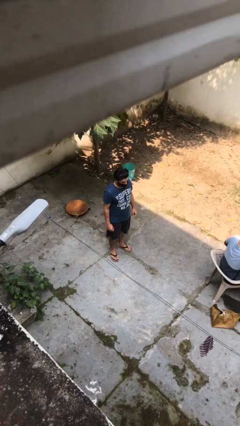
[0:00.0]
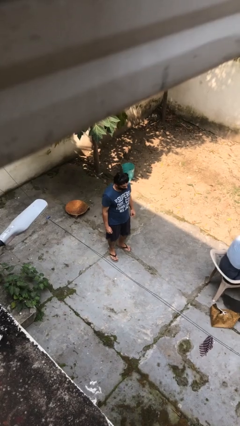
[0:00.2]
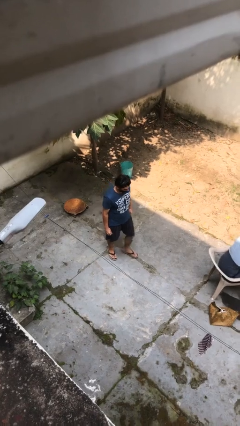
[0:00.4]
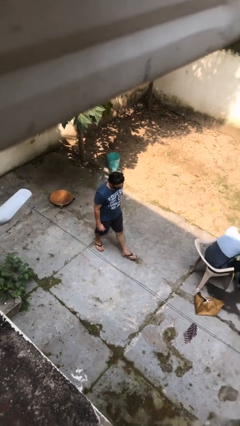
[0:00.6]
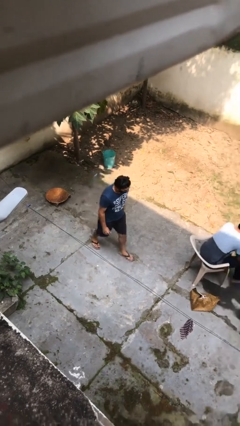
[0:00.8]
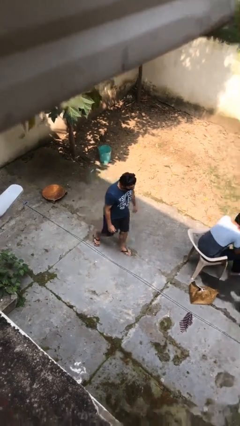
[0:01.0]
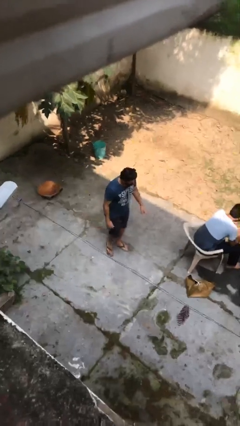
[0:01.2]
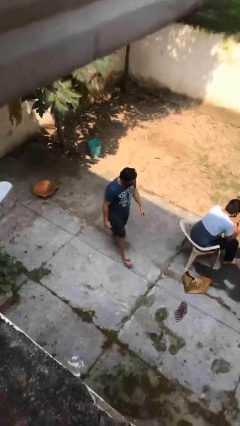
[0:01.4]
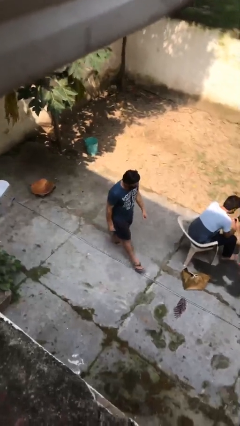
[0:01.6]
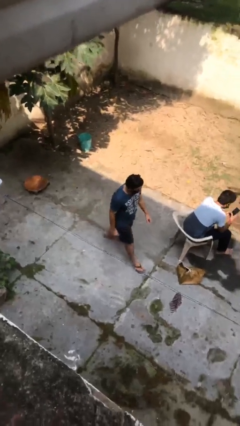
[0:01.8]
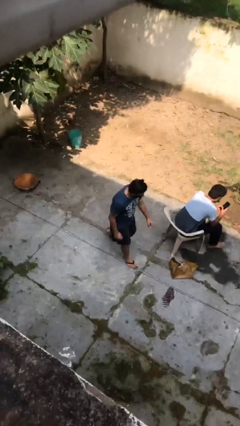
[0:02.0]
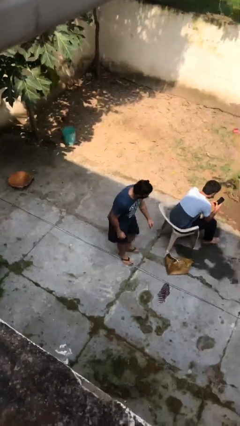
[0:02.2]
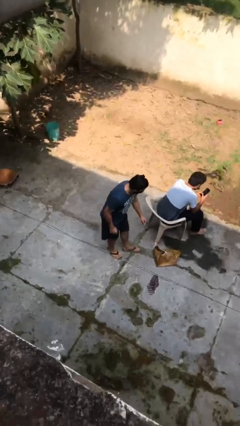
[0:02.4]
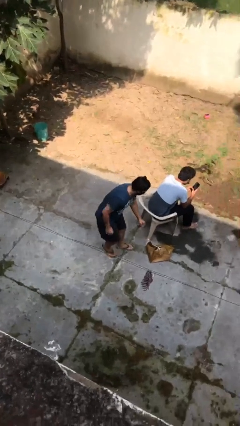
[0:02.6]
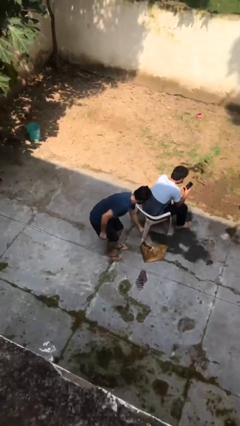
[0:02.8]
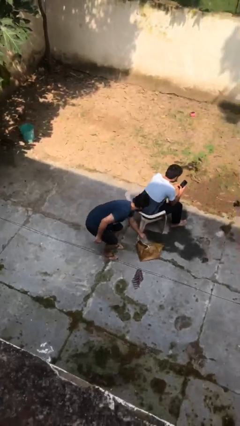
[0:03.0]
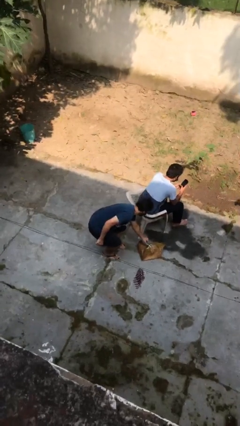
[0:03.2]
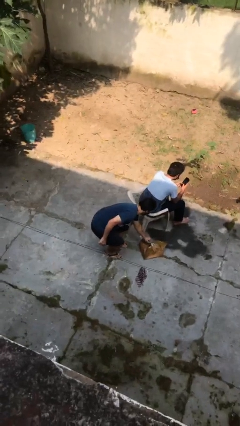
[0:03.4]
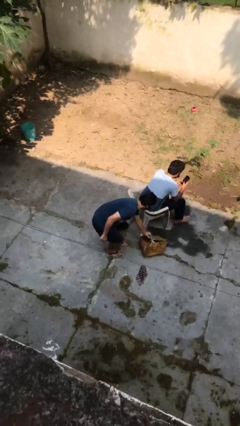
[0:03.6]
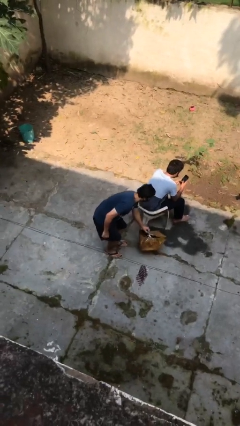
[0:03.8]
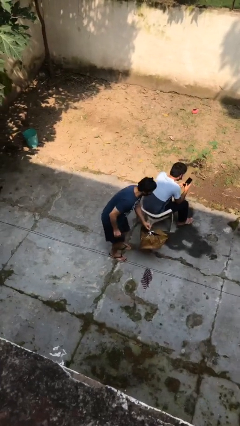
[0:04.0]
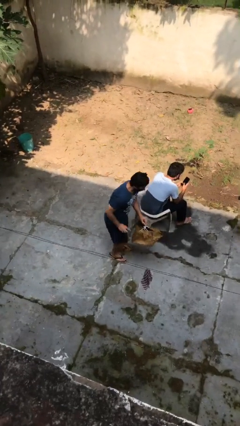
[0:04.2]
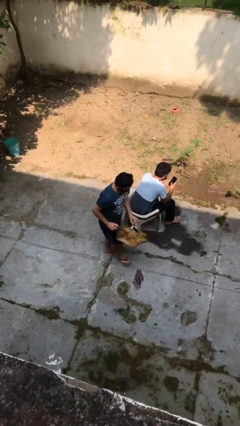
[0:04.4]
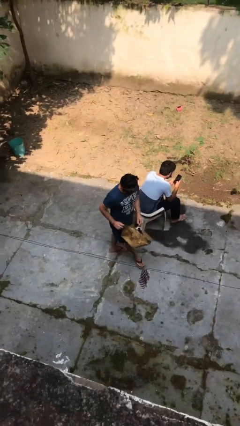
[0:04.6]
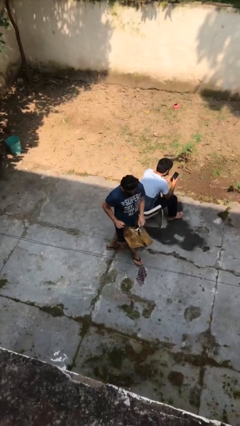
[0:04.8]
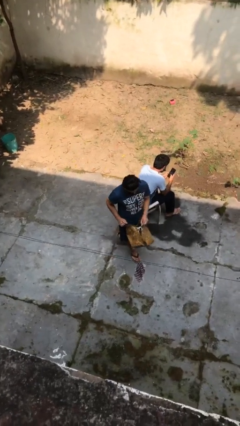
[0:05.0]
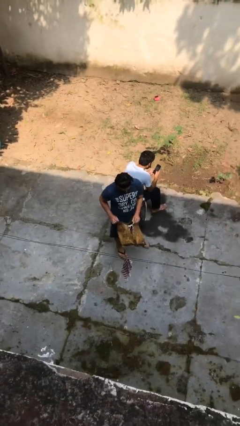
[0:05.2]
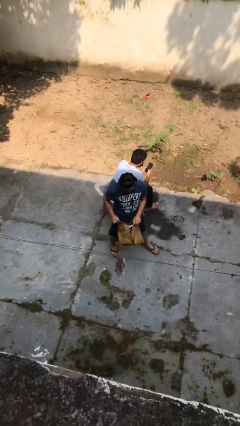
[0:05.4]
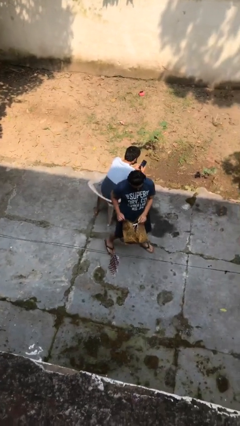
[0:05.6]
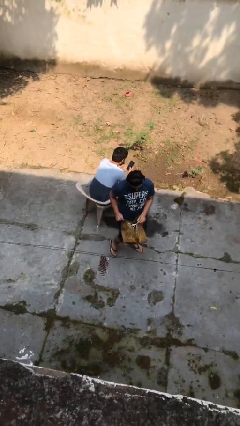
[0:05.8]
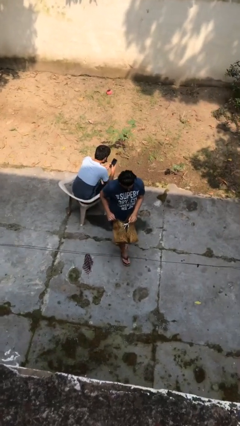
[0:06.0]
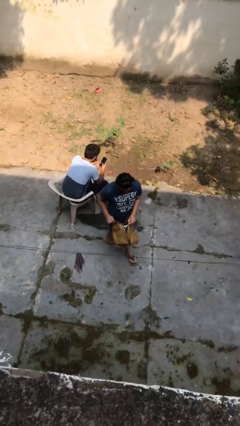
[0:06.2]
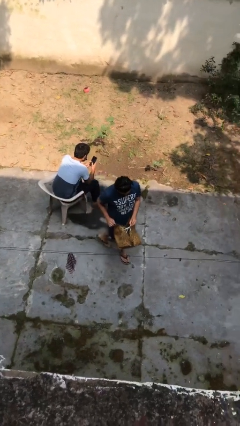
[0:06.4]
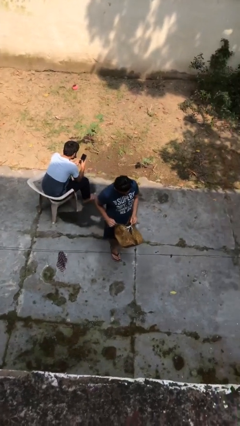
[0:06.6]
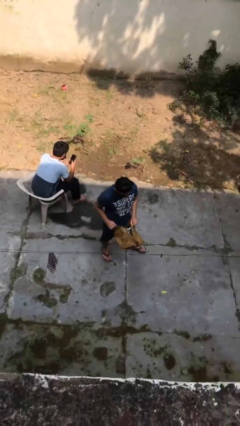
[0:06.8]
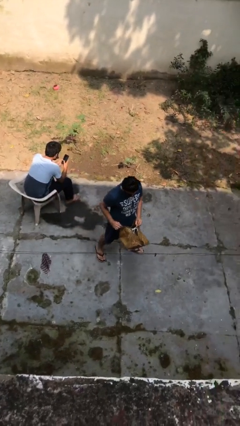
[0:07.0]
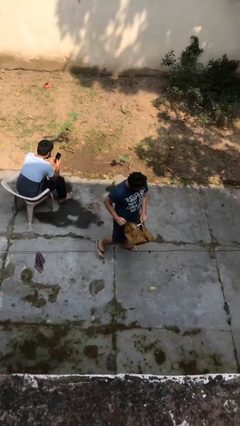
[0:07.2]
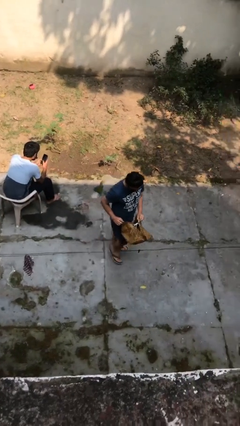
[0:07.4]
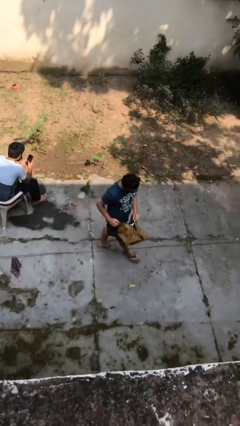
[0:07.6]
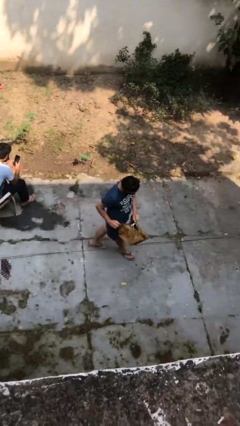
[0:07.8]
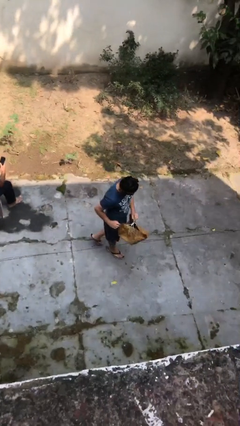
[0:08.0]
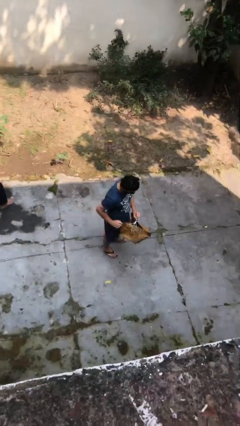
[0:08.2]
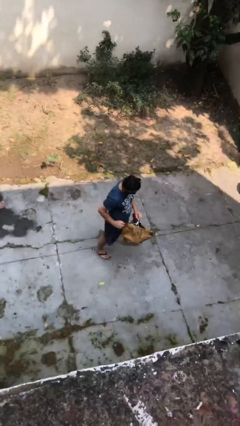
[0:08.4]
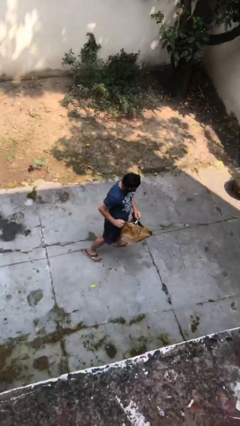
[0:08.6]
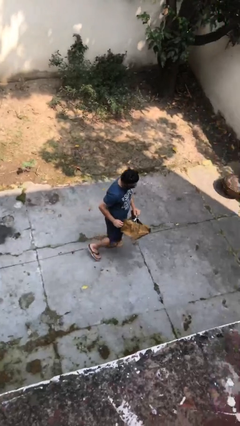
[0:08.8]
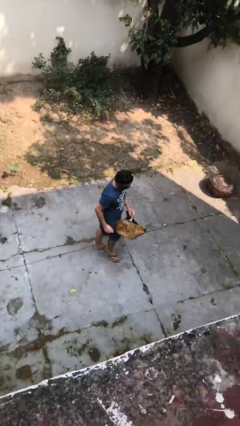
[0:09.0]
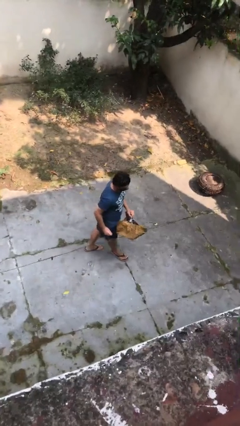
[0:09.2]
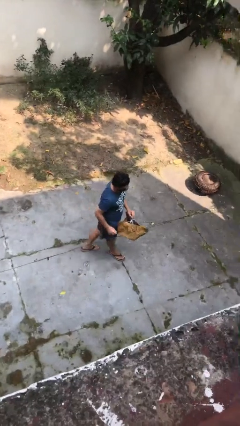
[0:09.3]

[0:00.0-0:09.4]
person steals object from person

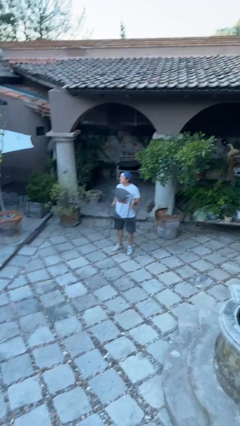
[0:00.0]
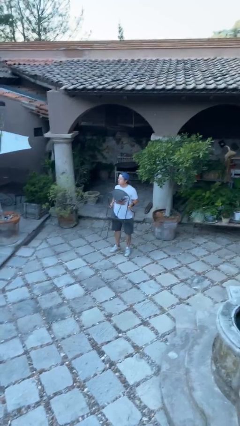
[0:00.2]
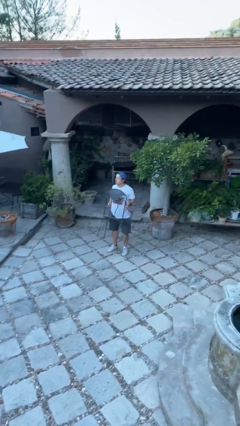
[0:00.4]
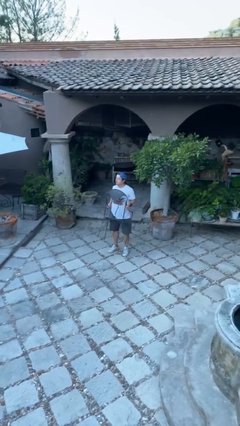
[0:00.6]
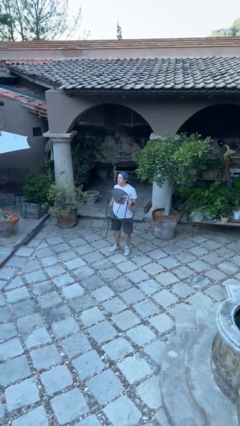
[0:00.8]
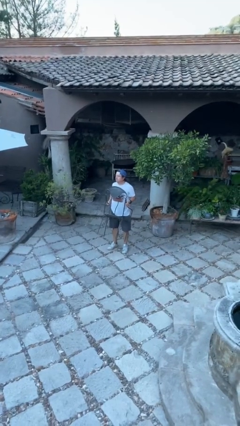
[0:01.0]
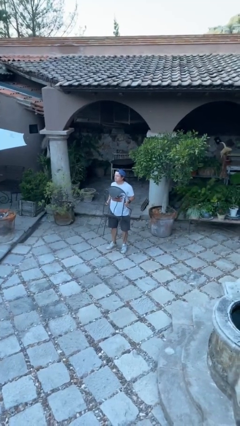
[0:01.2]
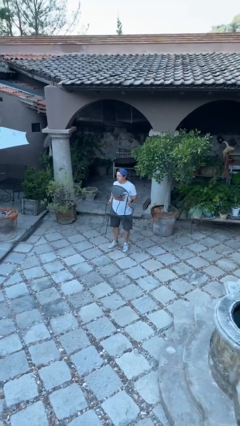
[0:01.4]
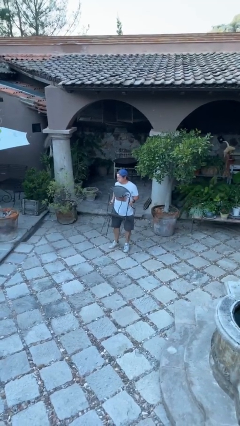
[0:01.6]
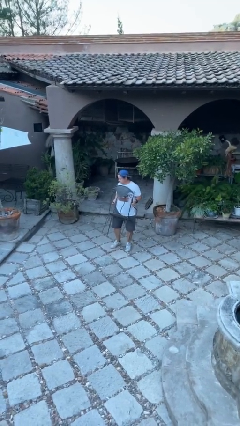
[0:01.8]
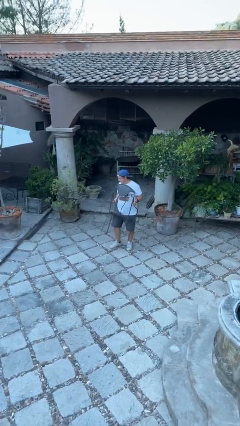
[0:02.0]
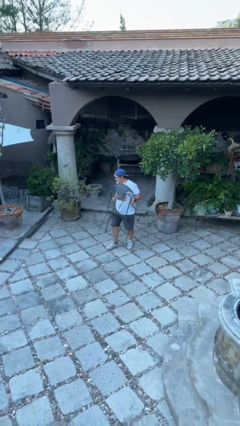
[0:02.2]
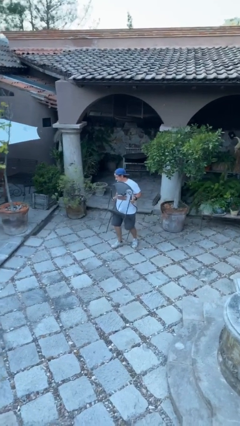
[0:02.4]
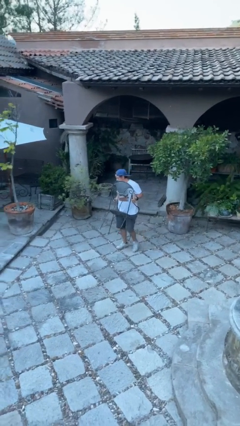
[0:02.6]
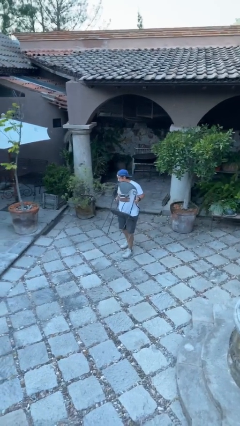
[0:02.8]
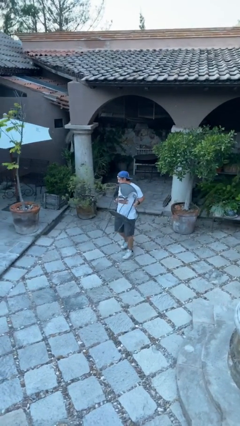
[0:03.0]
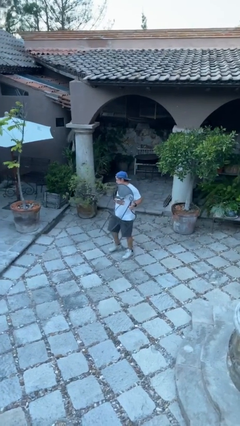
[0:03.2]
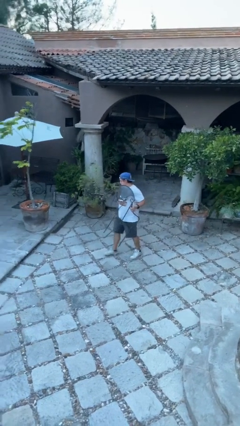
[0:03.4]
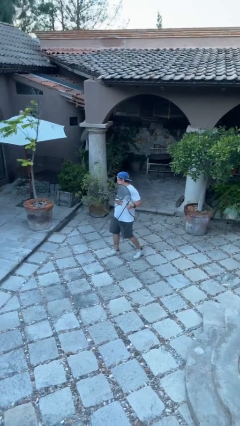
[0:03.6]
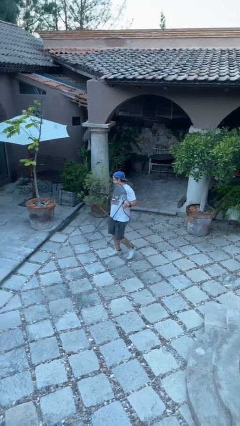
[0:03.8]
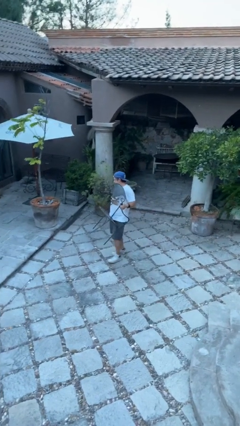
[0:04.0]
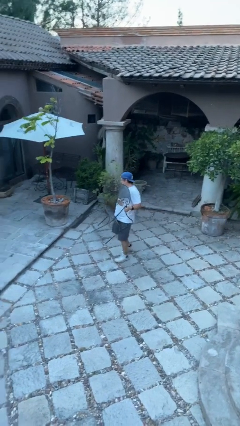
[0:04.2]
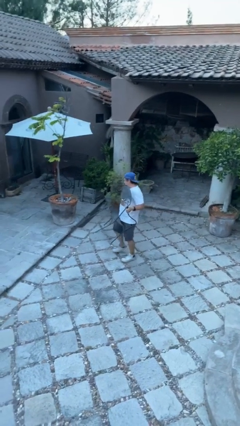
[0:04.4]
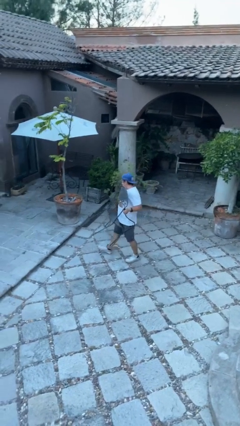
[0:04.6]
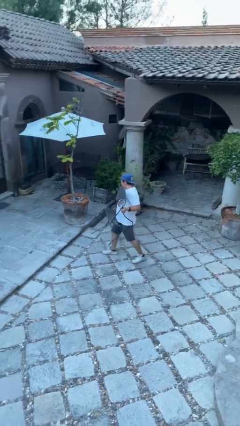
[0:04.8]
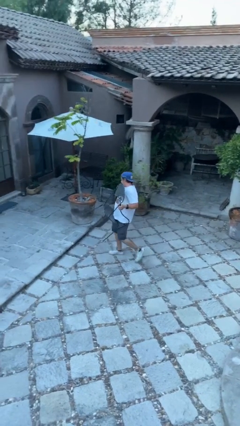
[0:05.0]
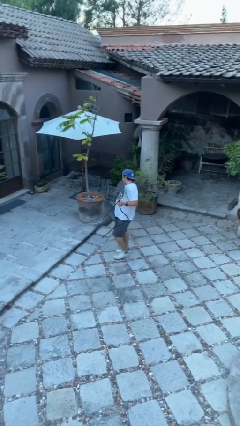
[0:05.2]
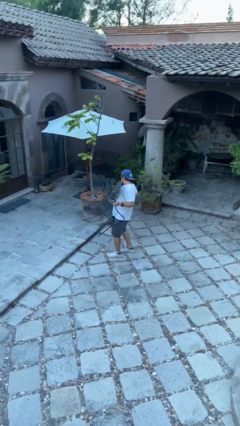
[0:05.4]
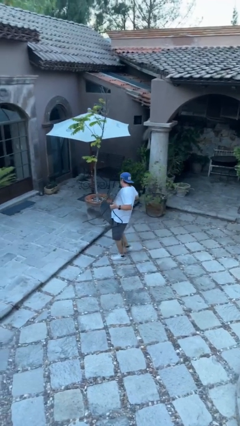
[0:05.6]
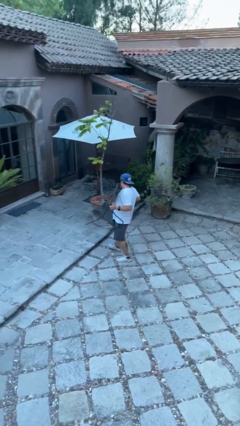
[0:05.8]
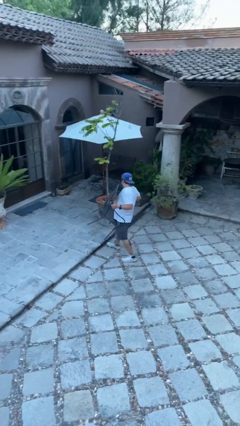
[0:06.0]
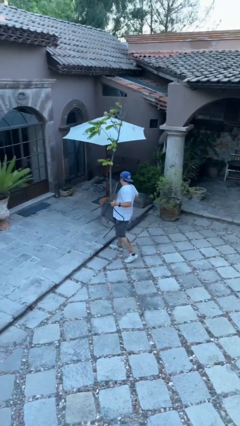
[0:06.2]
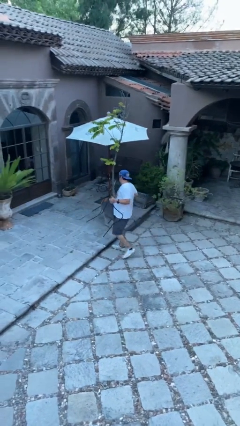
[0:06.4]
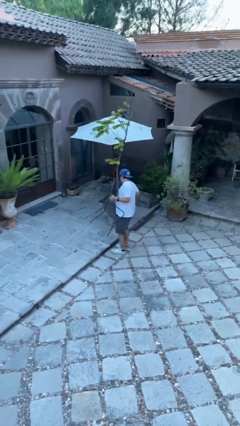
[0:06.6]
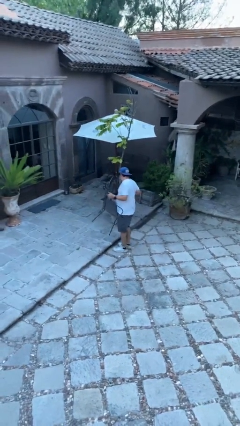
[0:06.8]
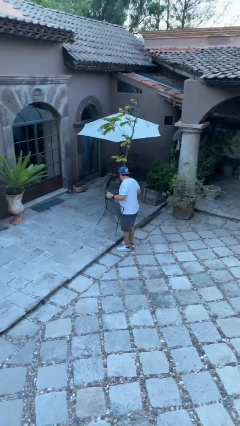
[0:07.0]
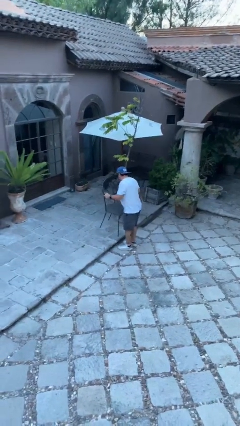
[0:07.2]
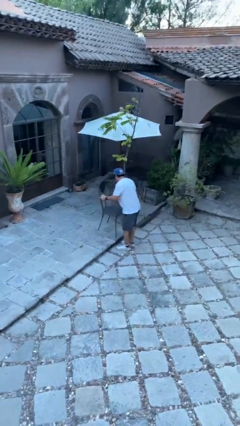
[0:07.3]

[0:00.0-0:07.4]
person carries heavy object

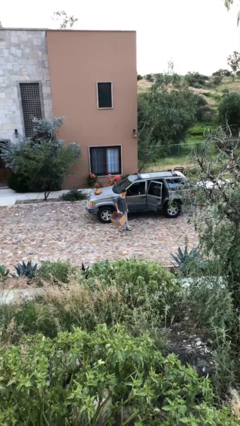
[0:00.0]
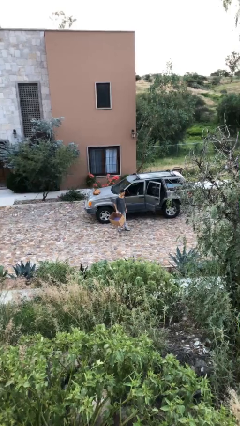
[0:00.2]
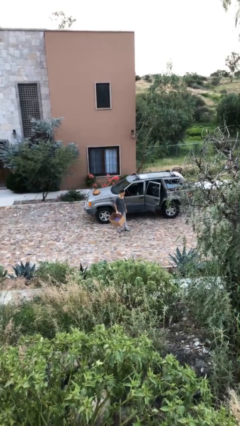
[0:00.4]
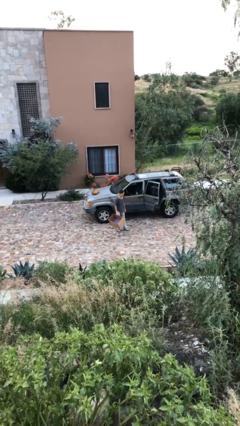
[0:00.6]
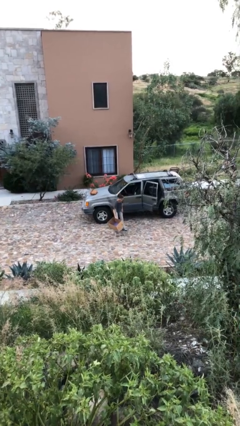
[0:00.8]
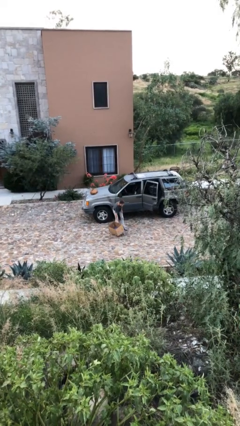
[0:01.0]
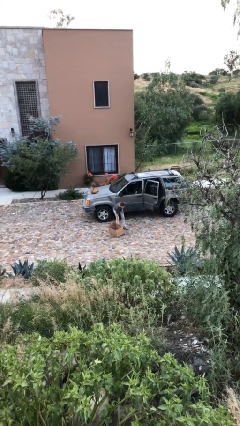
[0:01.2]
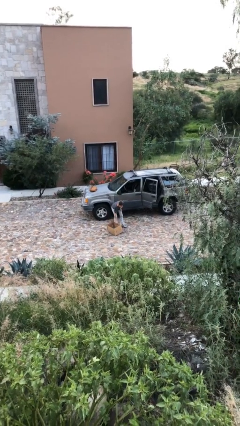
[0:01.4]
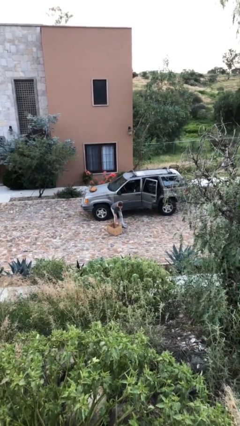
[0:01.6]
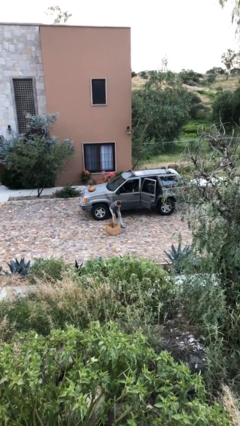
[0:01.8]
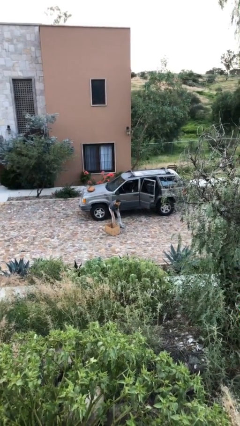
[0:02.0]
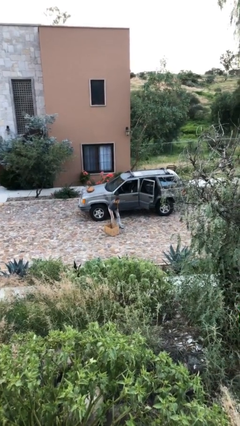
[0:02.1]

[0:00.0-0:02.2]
person puts down object on floor
